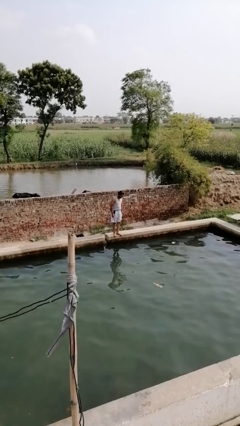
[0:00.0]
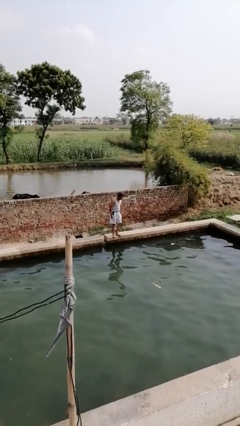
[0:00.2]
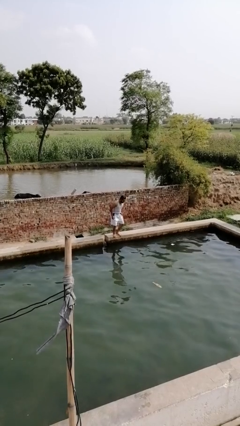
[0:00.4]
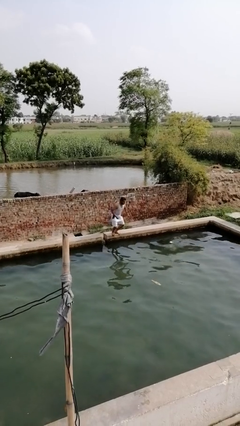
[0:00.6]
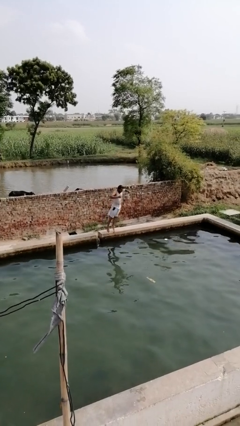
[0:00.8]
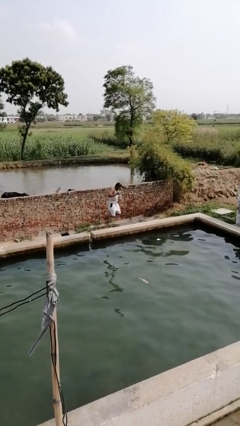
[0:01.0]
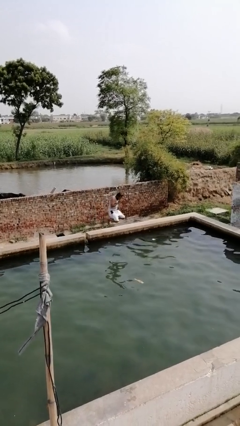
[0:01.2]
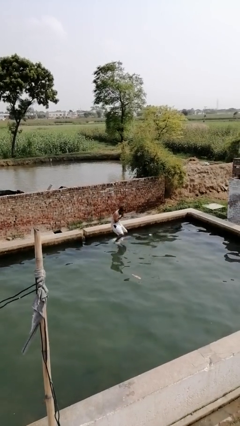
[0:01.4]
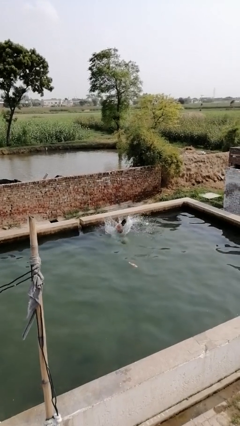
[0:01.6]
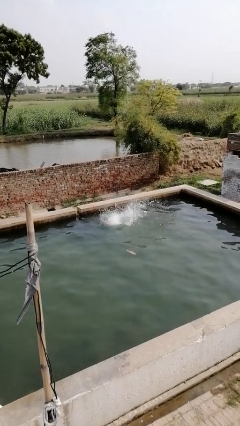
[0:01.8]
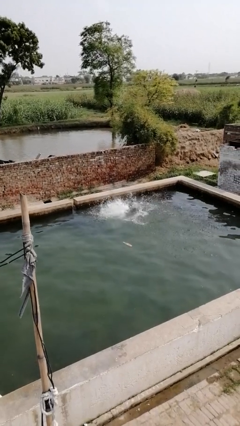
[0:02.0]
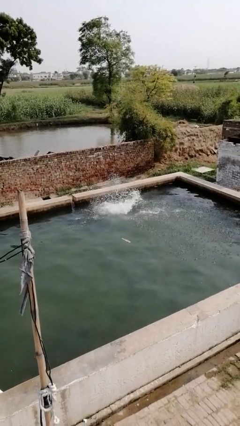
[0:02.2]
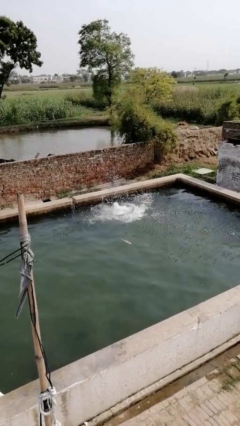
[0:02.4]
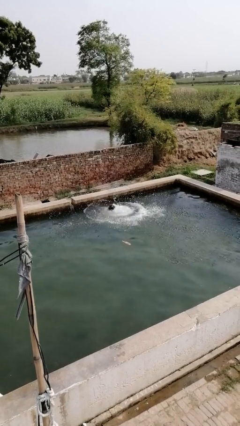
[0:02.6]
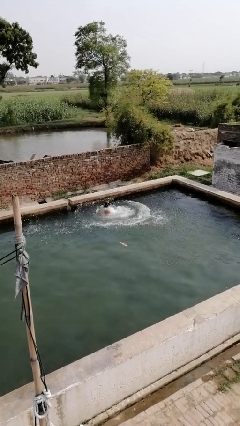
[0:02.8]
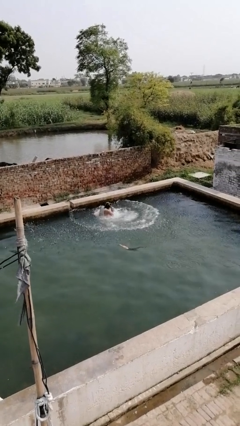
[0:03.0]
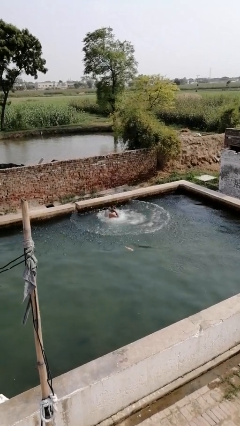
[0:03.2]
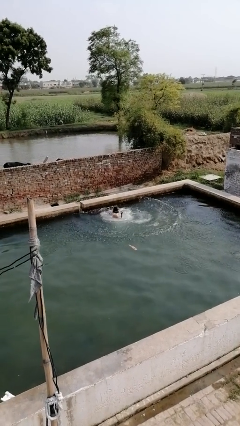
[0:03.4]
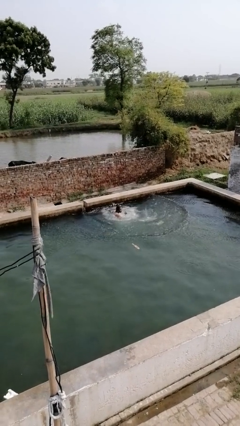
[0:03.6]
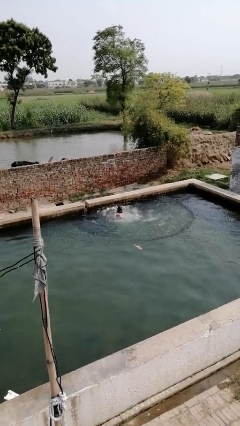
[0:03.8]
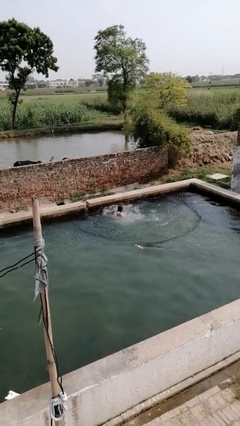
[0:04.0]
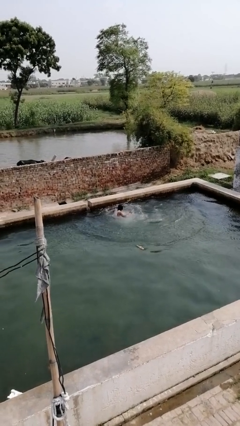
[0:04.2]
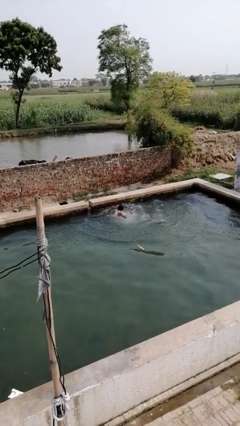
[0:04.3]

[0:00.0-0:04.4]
person jumps into pool

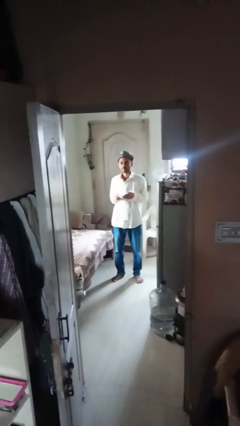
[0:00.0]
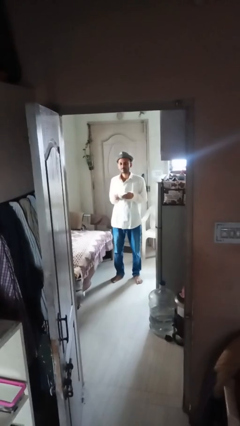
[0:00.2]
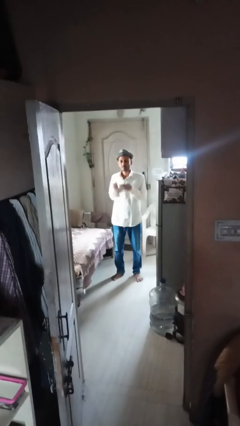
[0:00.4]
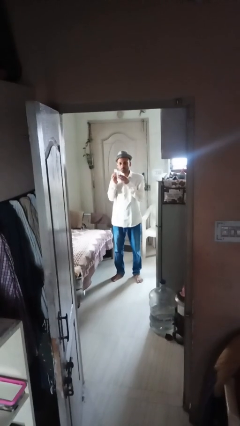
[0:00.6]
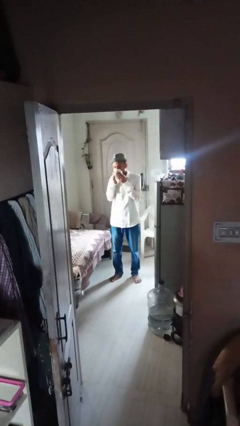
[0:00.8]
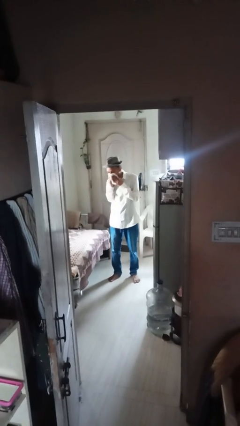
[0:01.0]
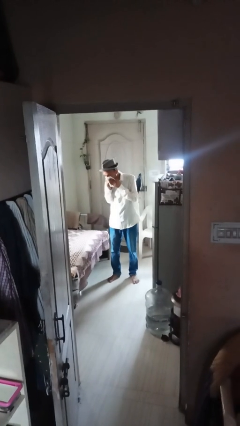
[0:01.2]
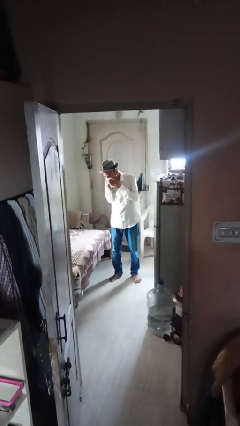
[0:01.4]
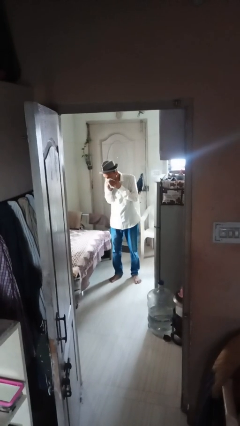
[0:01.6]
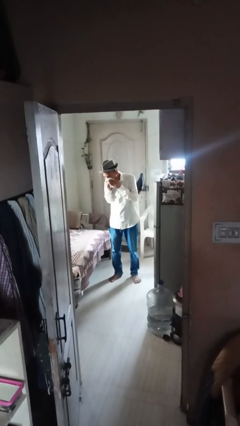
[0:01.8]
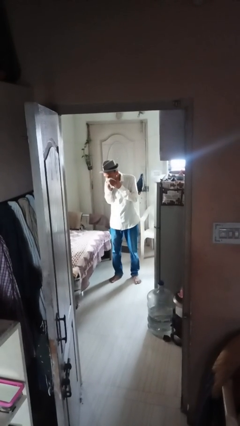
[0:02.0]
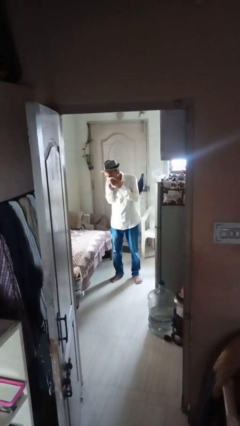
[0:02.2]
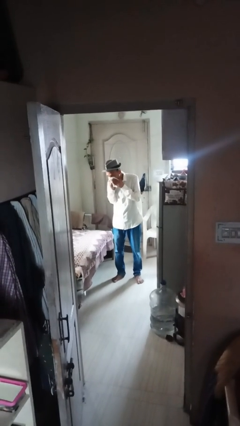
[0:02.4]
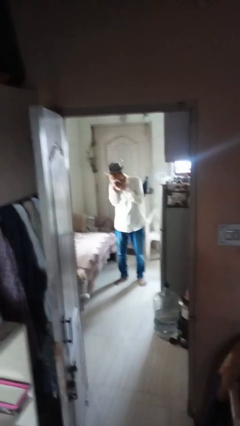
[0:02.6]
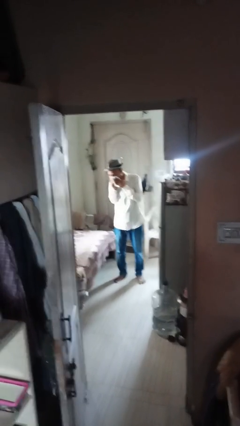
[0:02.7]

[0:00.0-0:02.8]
person blows nose

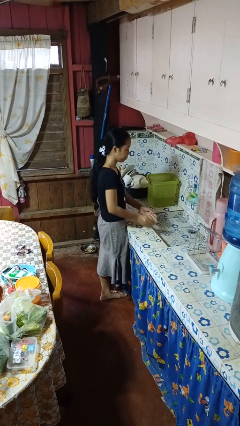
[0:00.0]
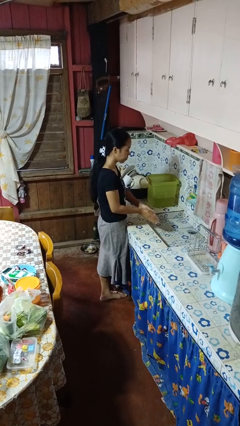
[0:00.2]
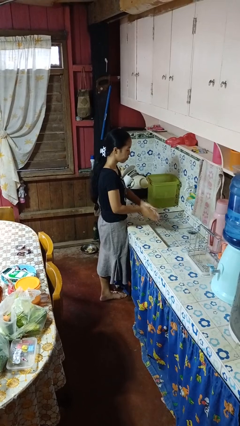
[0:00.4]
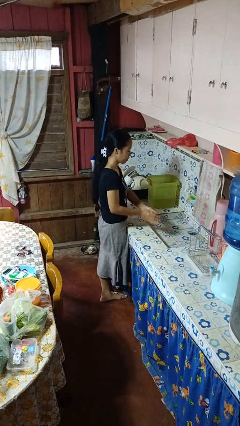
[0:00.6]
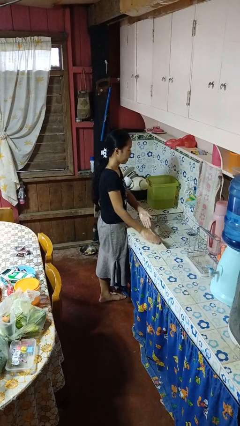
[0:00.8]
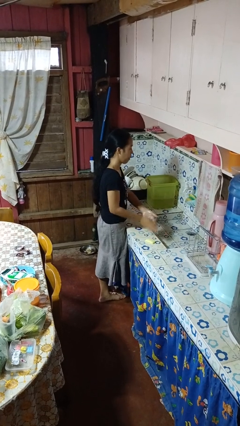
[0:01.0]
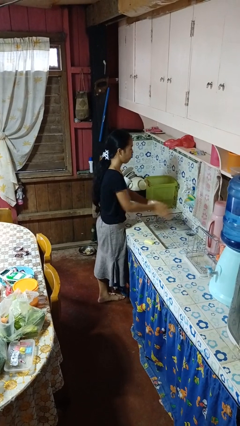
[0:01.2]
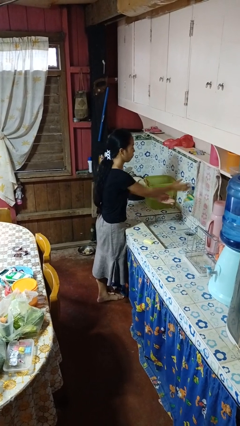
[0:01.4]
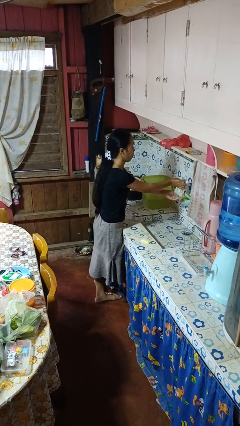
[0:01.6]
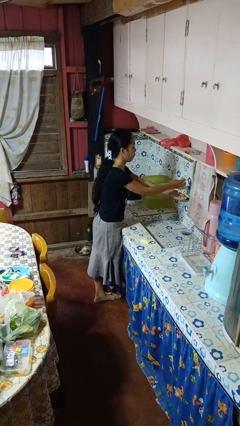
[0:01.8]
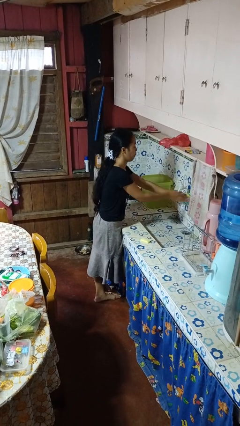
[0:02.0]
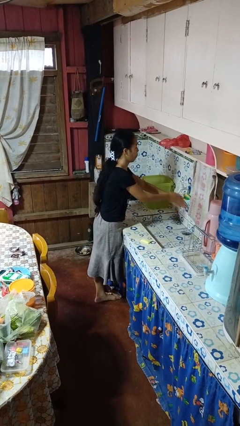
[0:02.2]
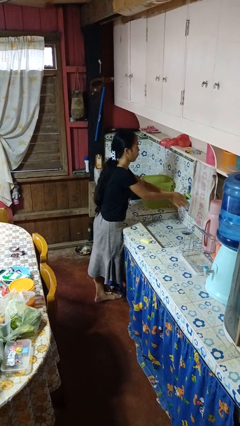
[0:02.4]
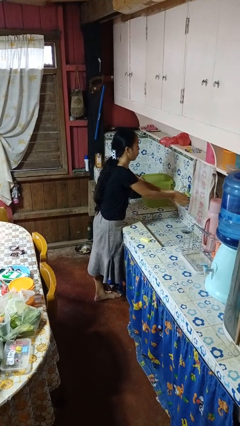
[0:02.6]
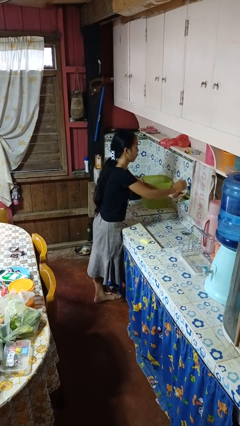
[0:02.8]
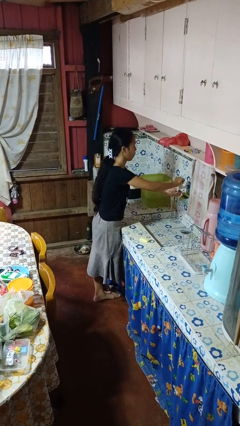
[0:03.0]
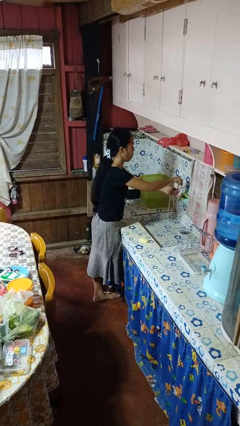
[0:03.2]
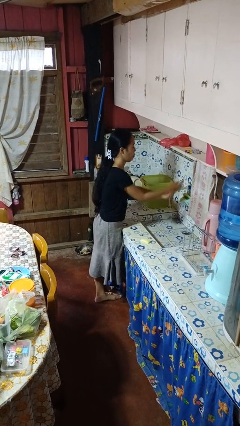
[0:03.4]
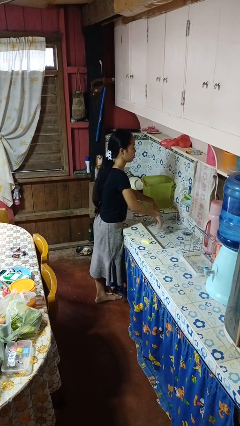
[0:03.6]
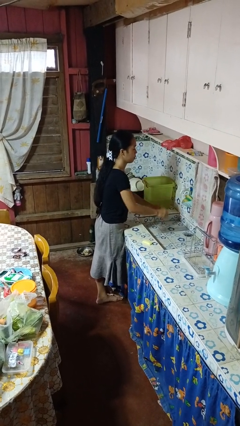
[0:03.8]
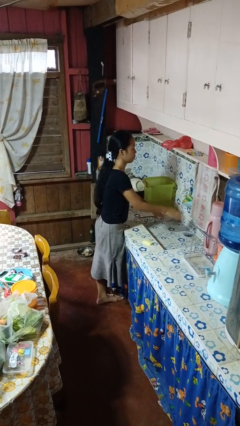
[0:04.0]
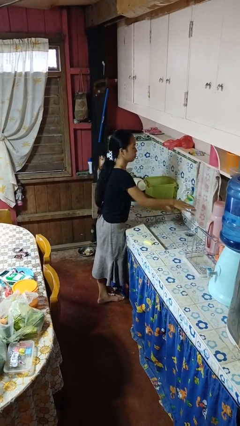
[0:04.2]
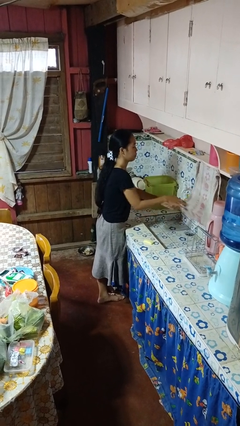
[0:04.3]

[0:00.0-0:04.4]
person washes hands

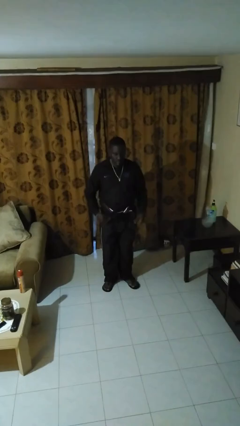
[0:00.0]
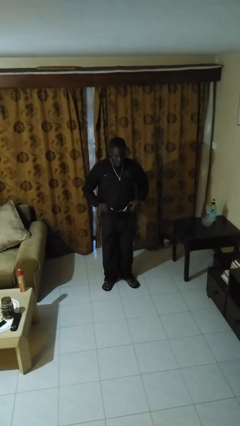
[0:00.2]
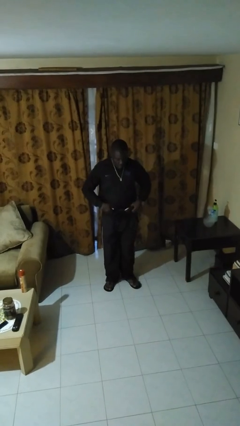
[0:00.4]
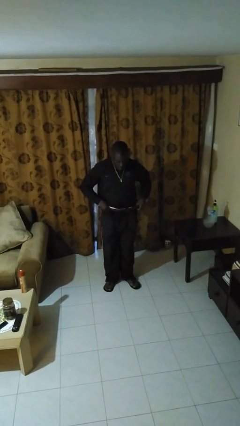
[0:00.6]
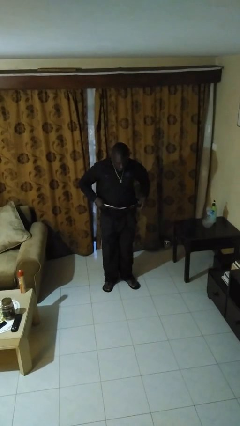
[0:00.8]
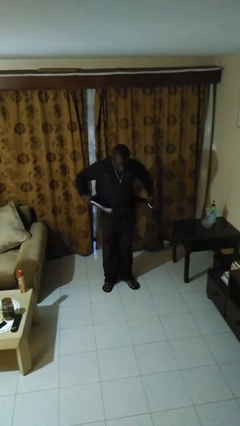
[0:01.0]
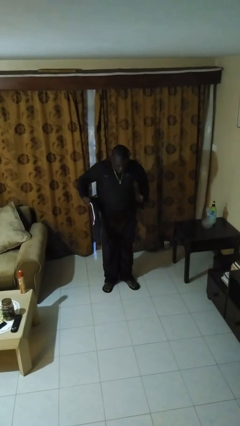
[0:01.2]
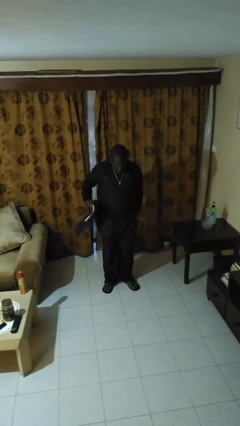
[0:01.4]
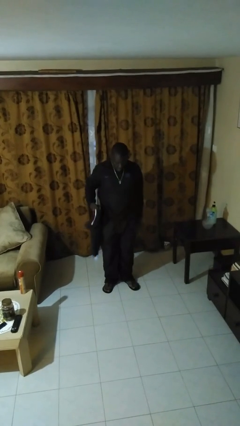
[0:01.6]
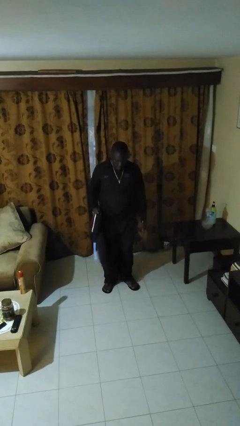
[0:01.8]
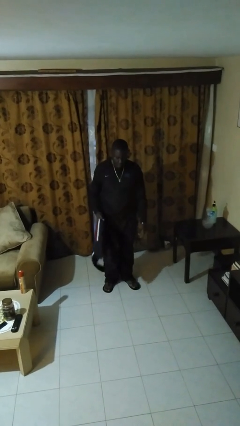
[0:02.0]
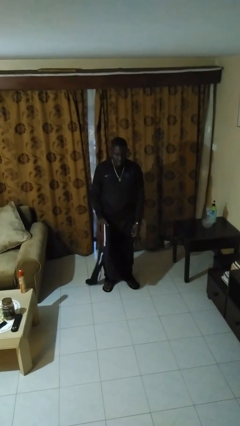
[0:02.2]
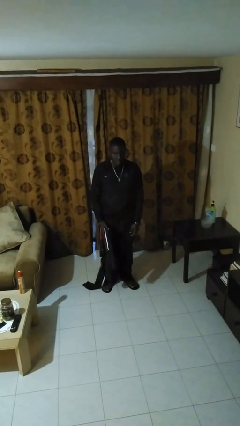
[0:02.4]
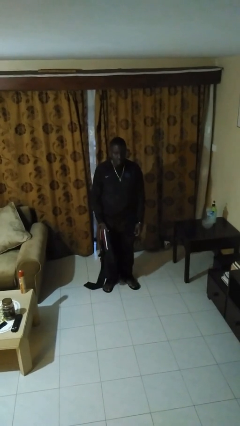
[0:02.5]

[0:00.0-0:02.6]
person unties jacket around waist

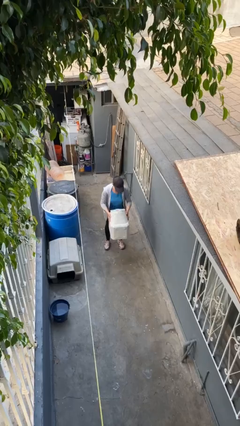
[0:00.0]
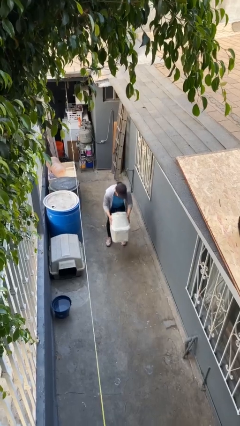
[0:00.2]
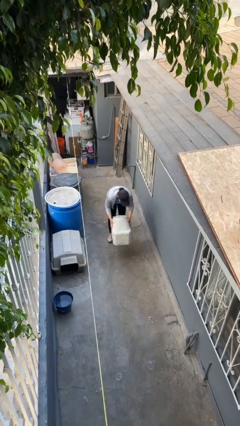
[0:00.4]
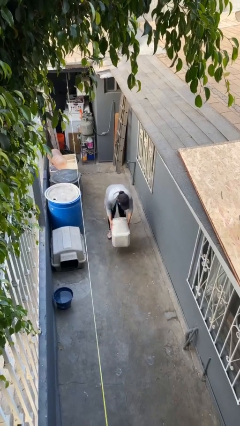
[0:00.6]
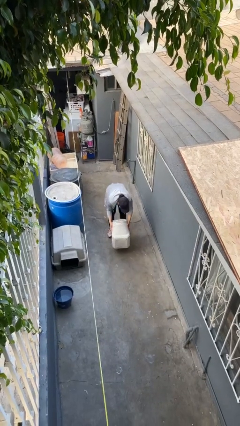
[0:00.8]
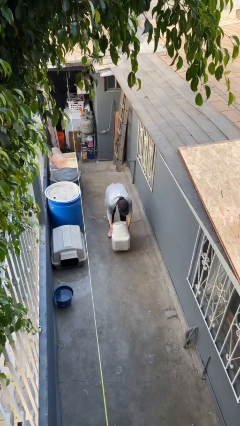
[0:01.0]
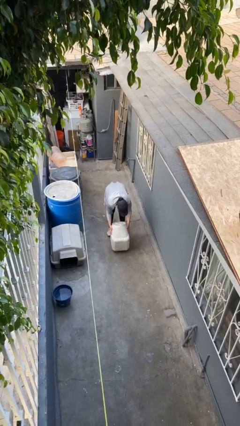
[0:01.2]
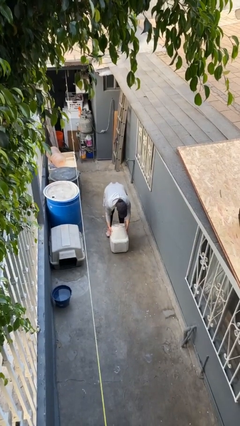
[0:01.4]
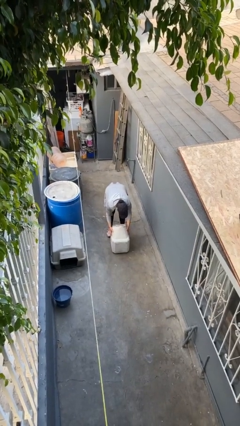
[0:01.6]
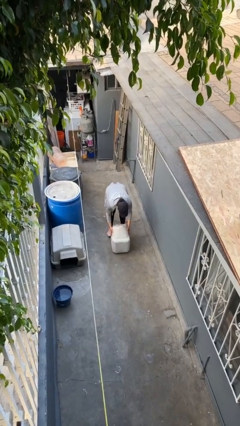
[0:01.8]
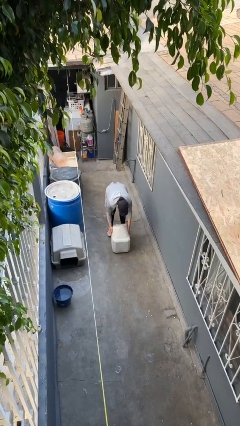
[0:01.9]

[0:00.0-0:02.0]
person puts down object on floor

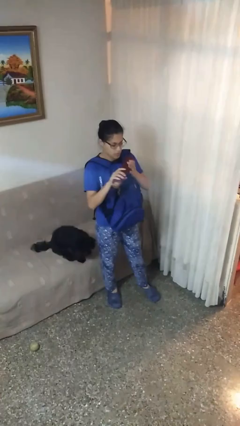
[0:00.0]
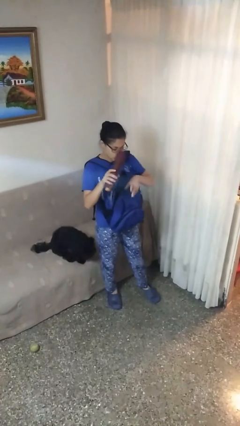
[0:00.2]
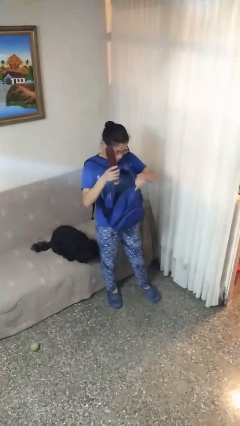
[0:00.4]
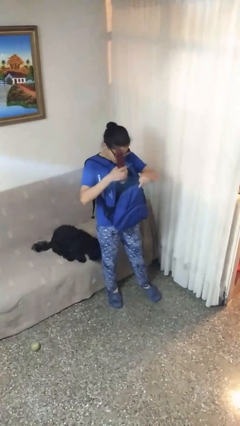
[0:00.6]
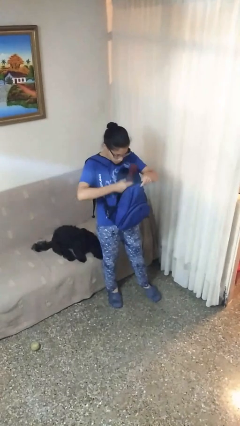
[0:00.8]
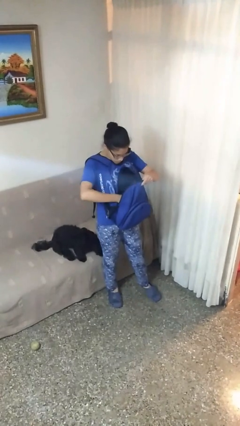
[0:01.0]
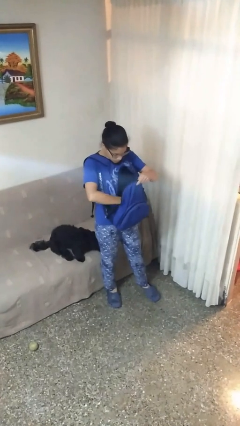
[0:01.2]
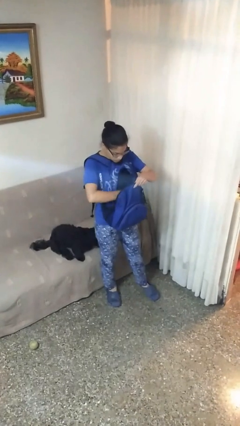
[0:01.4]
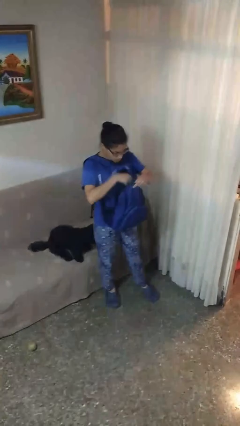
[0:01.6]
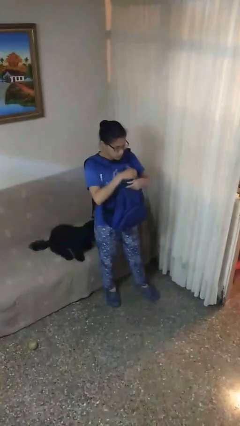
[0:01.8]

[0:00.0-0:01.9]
person puts object into backpack
